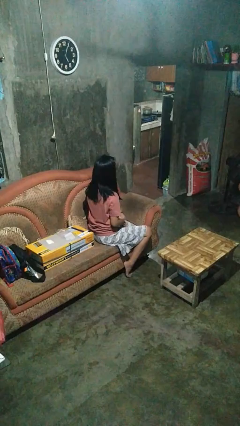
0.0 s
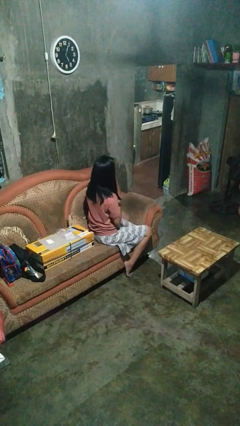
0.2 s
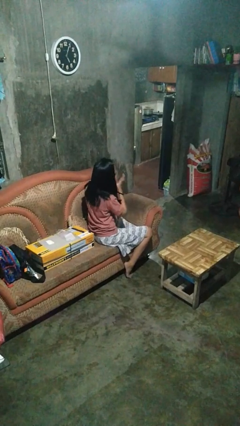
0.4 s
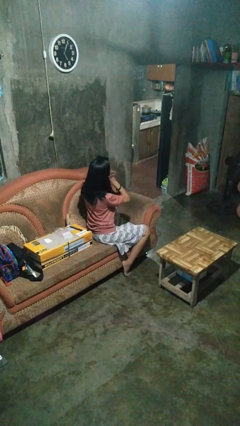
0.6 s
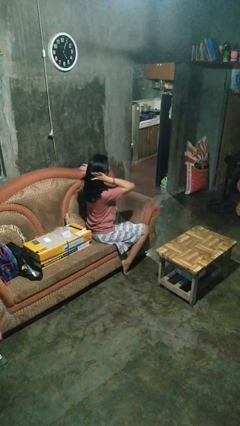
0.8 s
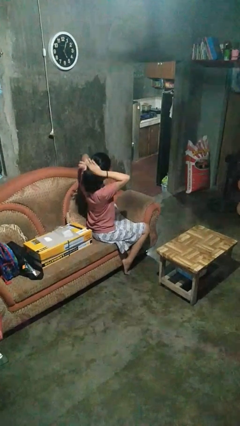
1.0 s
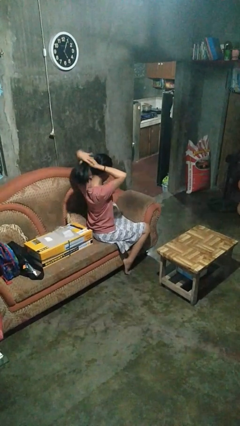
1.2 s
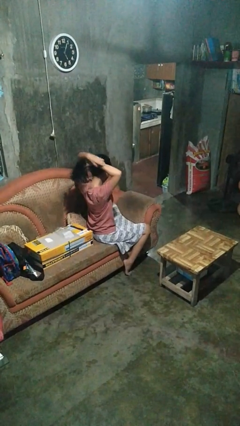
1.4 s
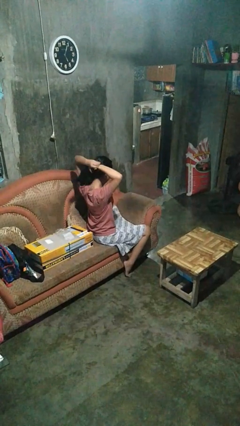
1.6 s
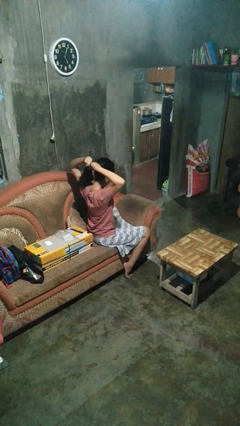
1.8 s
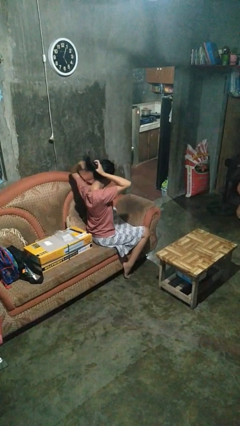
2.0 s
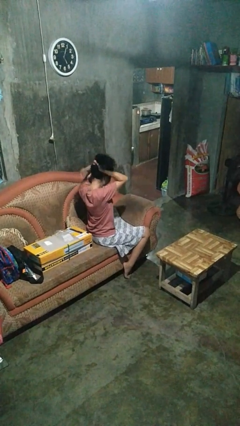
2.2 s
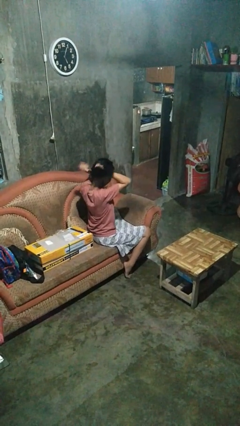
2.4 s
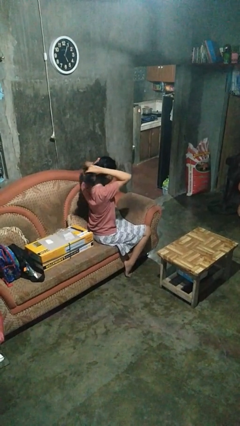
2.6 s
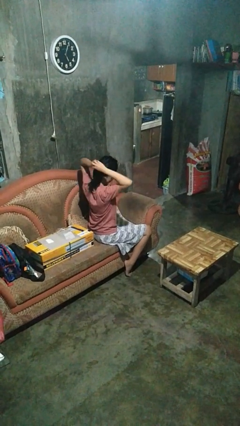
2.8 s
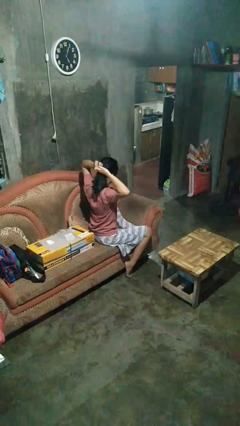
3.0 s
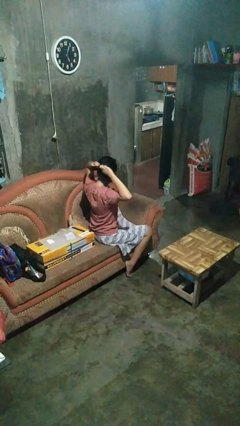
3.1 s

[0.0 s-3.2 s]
person puts hair in ponytail

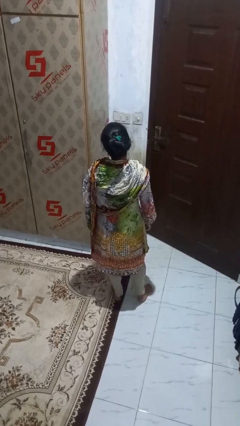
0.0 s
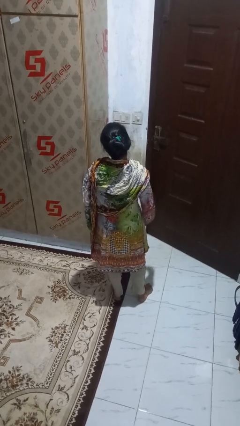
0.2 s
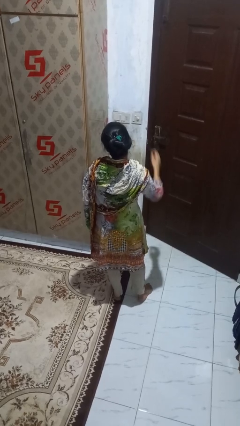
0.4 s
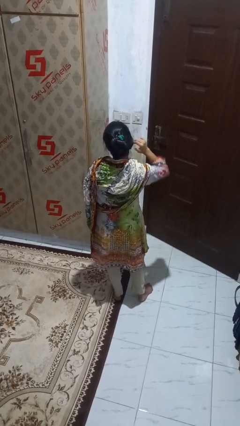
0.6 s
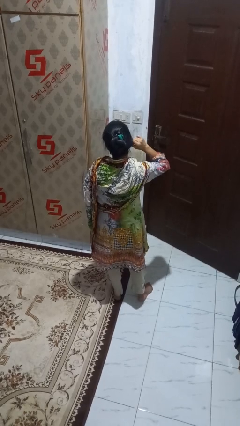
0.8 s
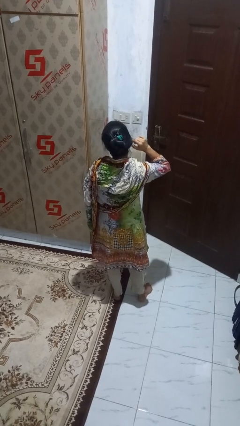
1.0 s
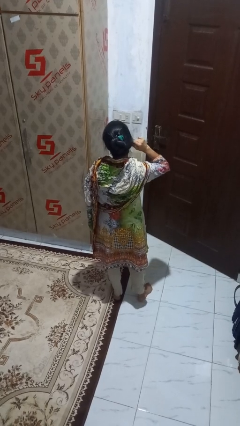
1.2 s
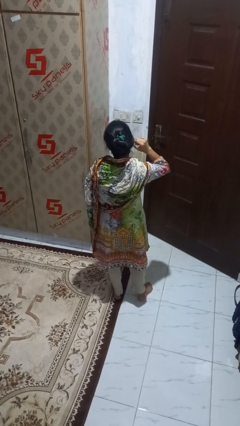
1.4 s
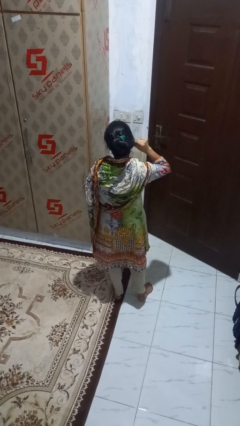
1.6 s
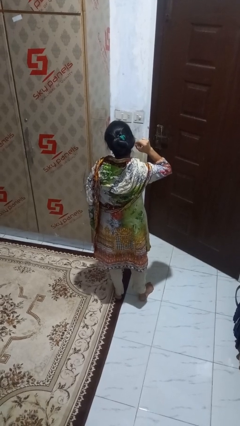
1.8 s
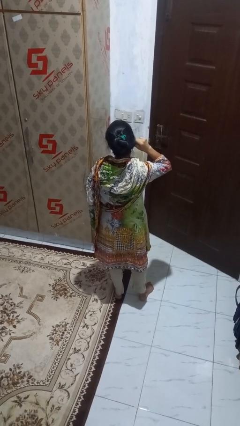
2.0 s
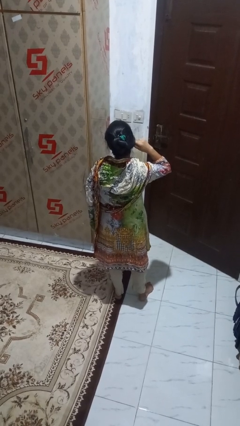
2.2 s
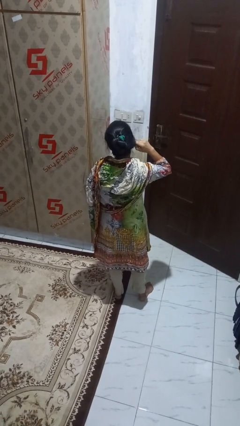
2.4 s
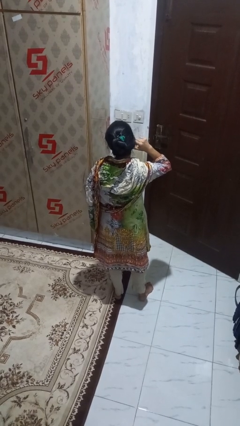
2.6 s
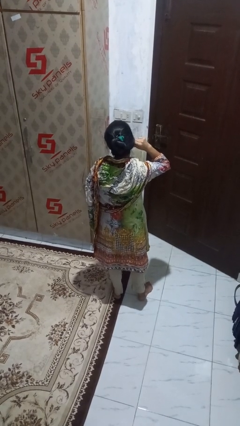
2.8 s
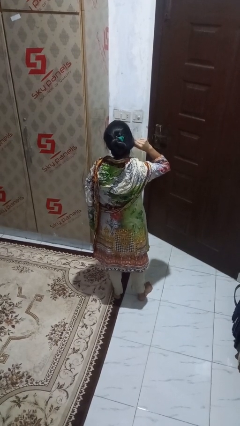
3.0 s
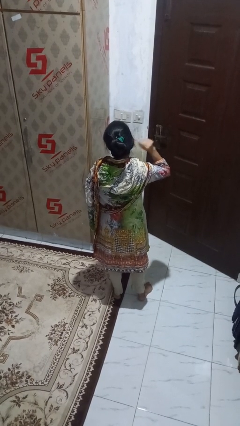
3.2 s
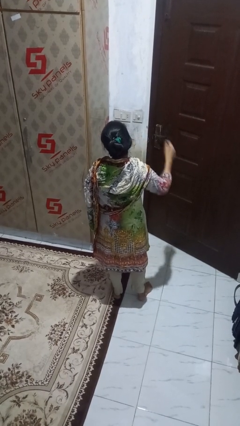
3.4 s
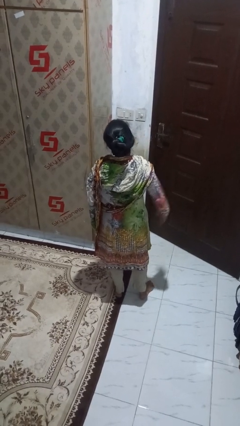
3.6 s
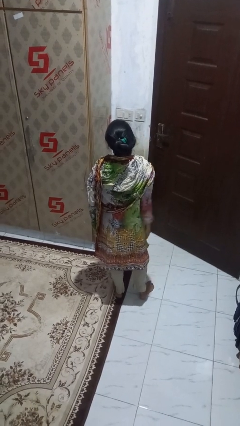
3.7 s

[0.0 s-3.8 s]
person touches earlobe

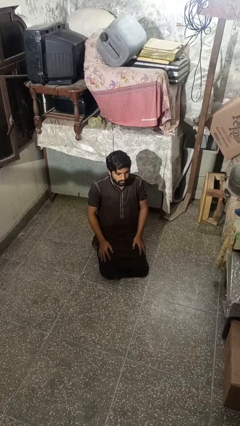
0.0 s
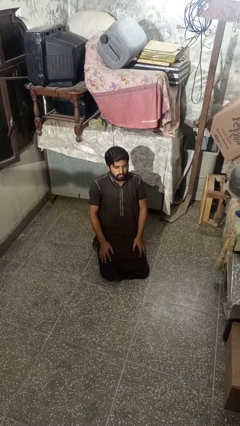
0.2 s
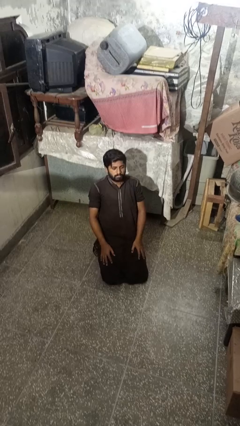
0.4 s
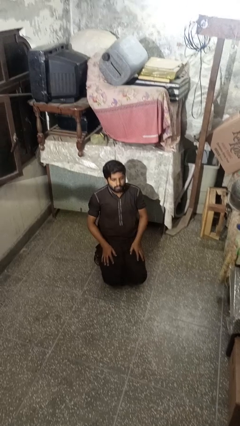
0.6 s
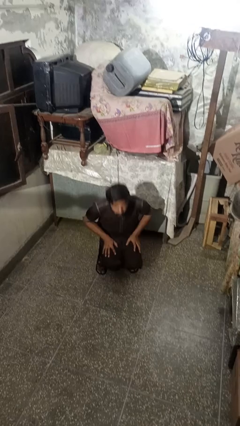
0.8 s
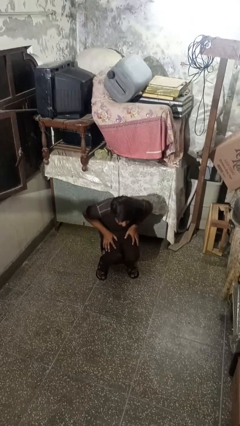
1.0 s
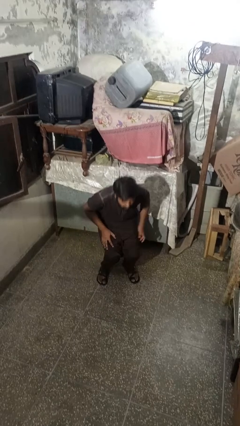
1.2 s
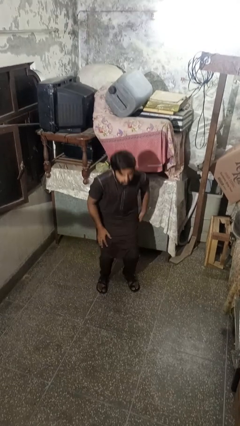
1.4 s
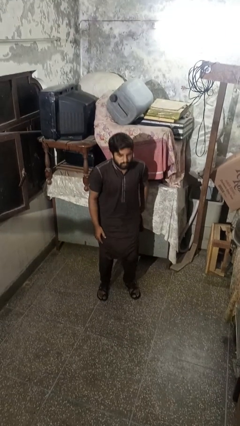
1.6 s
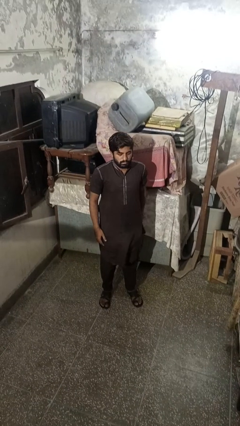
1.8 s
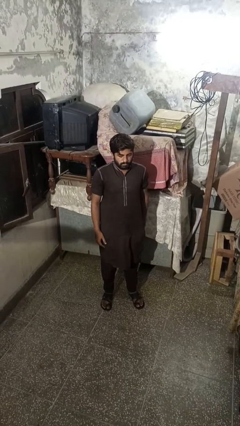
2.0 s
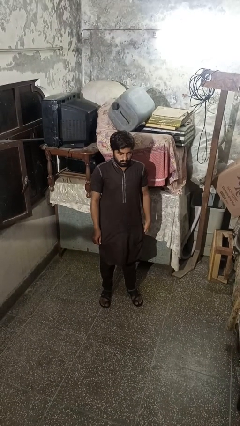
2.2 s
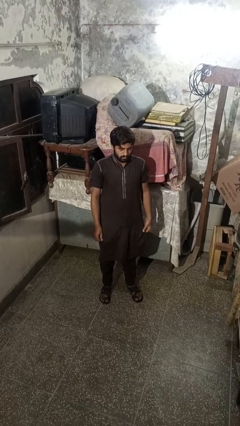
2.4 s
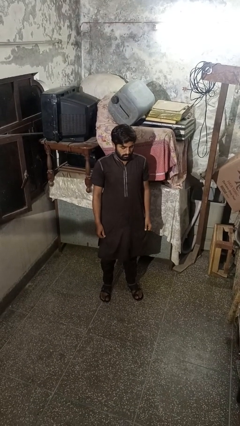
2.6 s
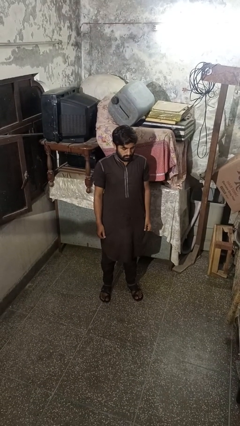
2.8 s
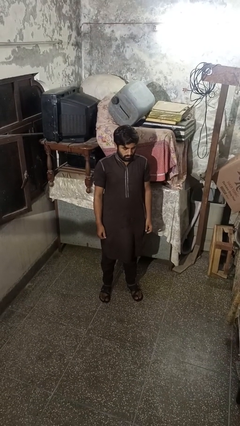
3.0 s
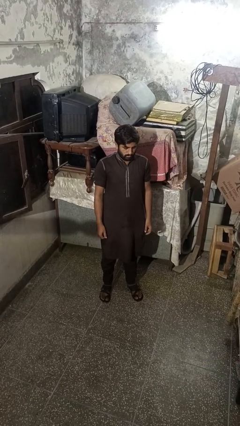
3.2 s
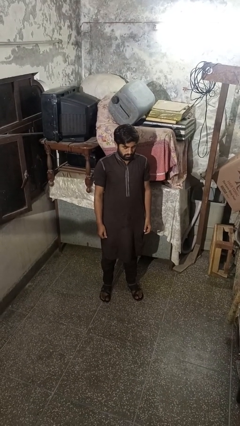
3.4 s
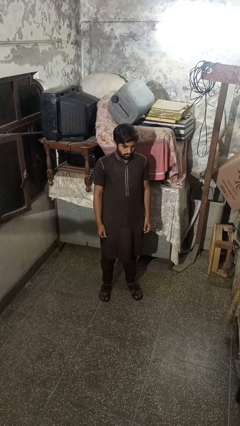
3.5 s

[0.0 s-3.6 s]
person stands up from floor

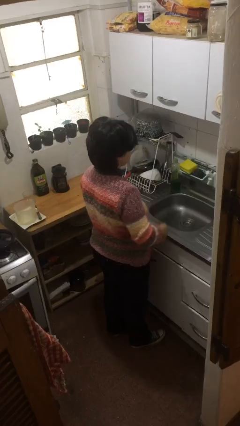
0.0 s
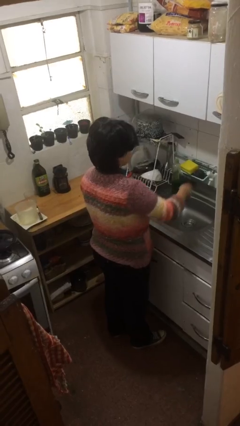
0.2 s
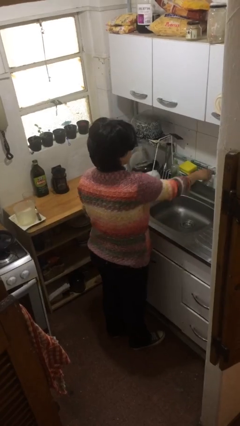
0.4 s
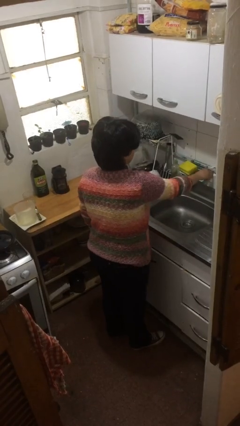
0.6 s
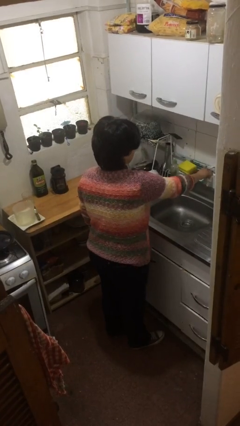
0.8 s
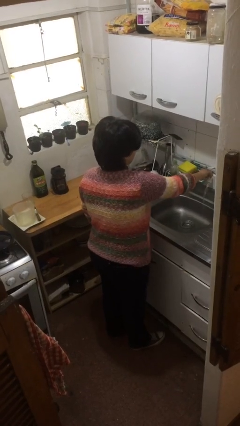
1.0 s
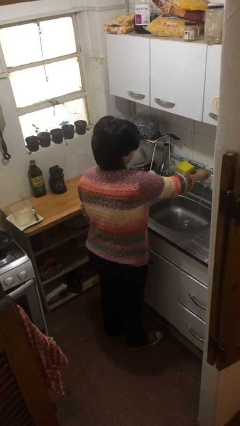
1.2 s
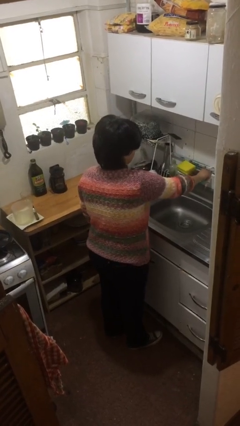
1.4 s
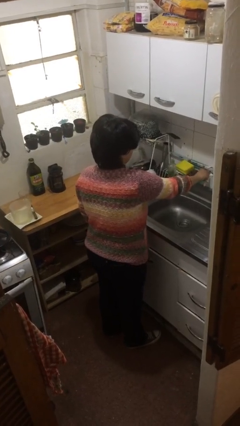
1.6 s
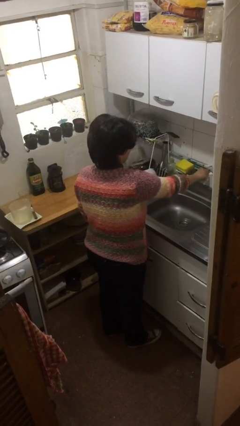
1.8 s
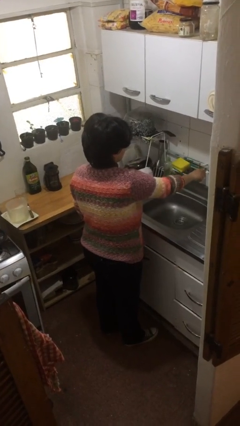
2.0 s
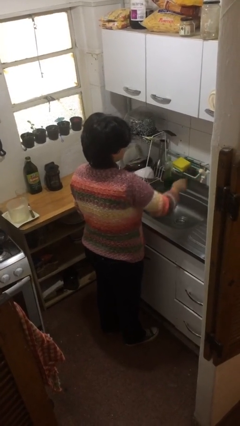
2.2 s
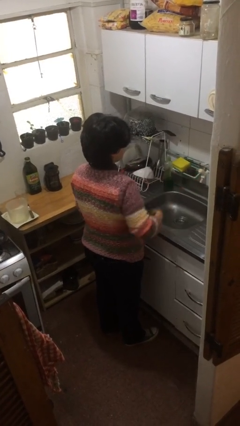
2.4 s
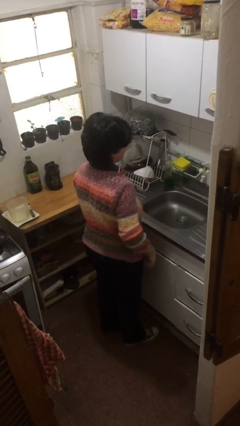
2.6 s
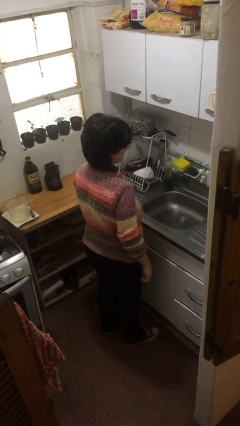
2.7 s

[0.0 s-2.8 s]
person turns on faucet

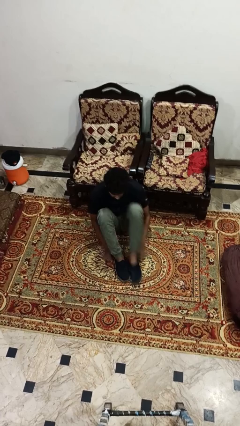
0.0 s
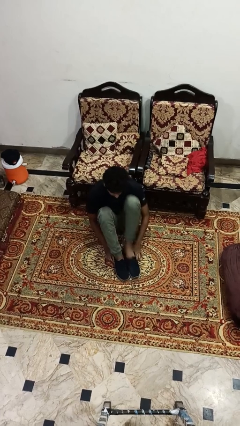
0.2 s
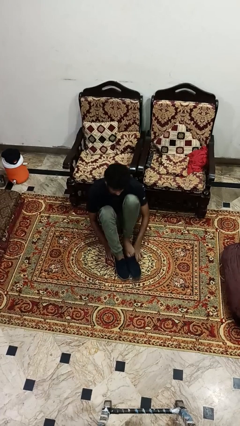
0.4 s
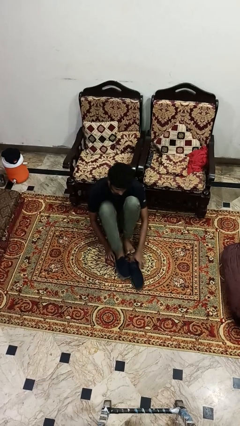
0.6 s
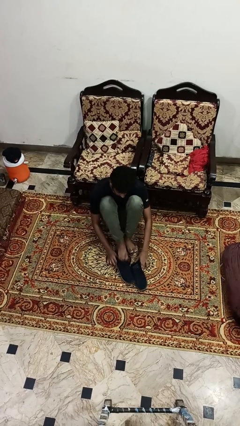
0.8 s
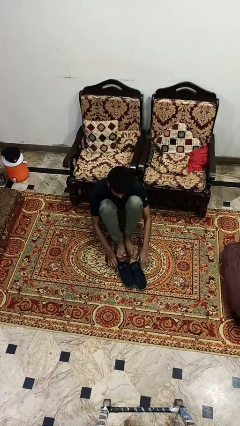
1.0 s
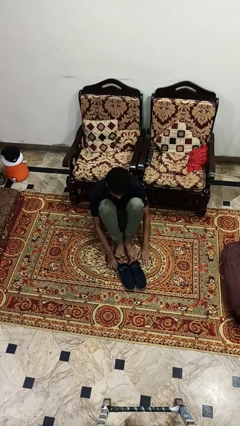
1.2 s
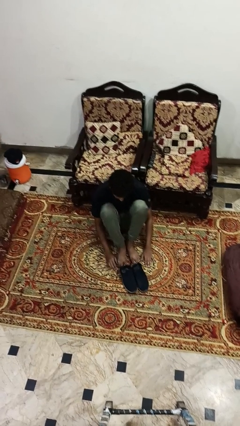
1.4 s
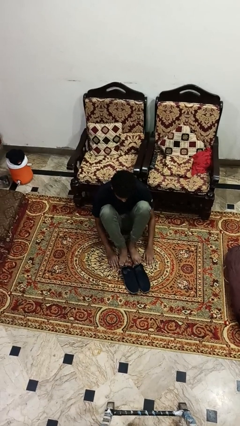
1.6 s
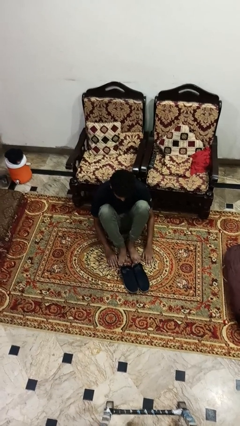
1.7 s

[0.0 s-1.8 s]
person takes off shoes

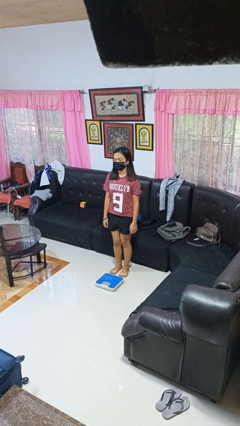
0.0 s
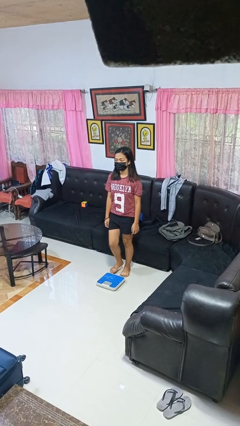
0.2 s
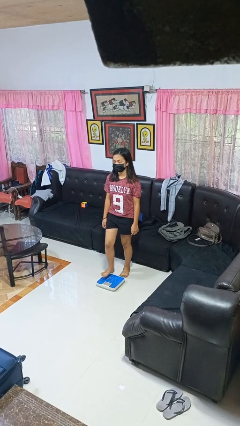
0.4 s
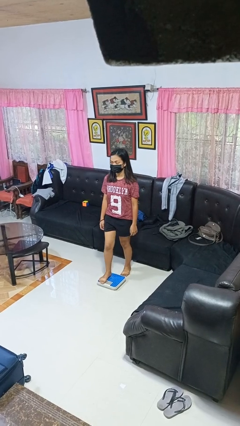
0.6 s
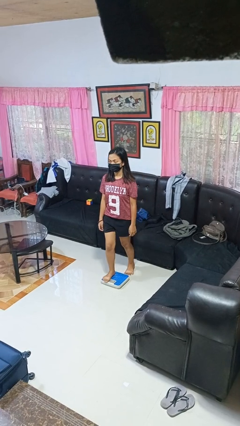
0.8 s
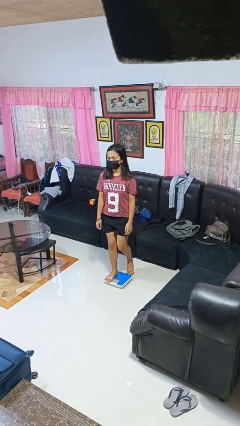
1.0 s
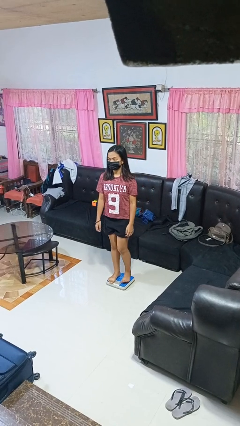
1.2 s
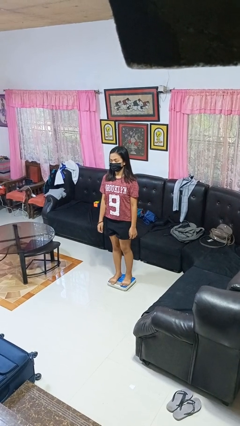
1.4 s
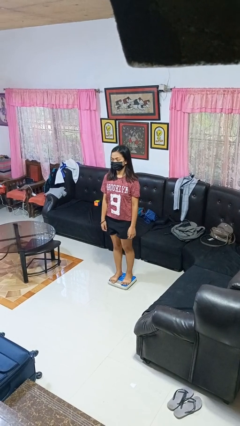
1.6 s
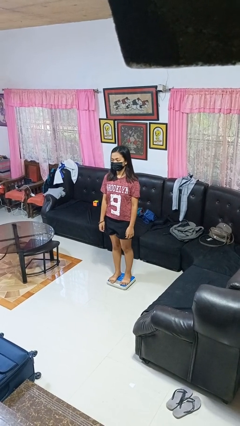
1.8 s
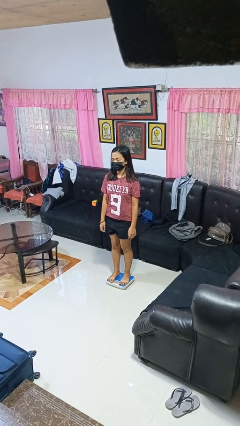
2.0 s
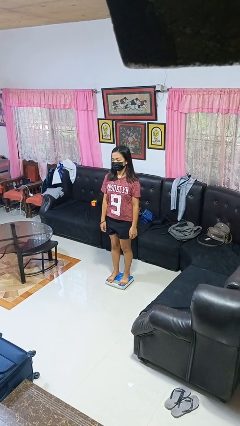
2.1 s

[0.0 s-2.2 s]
person uses bodyweight scale
